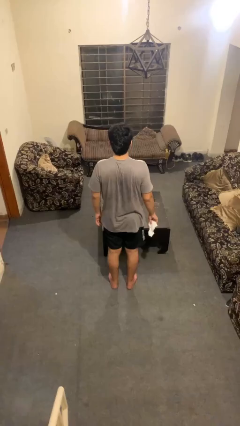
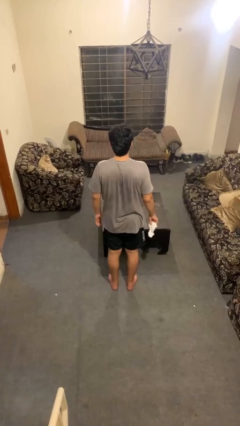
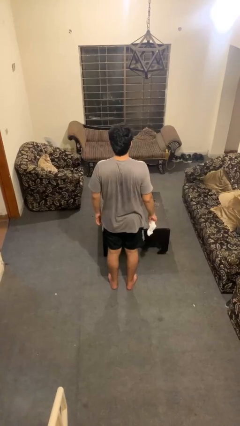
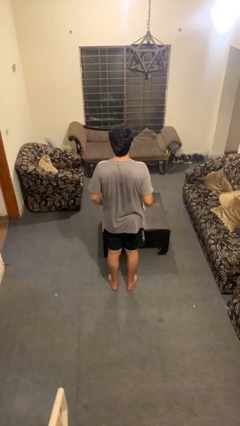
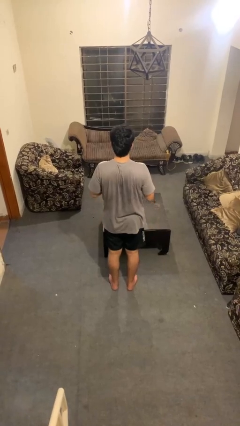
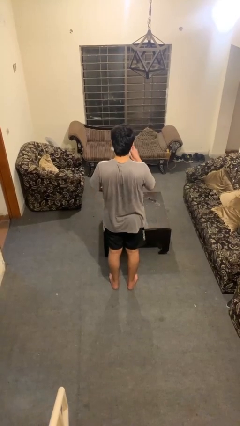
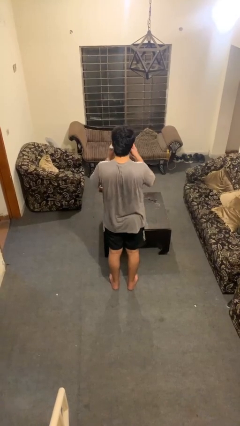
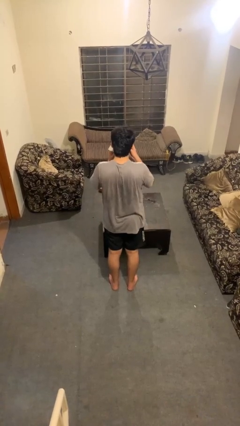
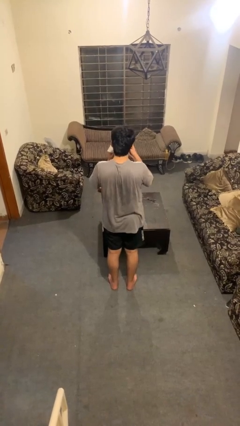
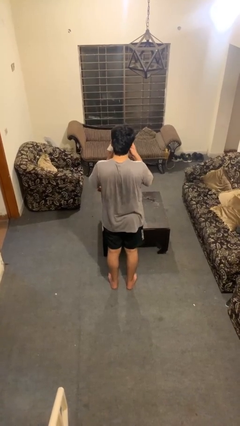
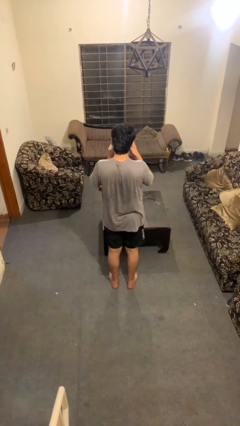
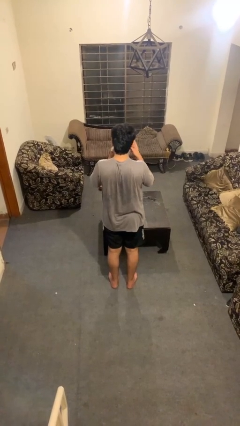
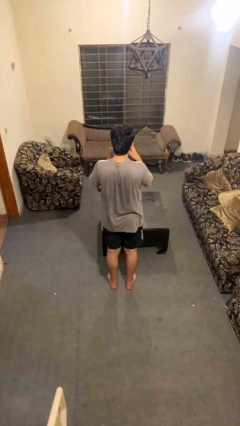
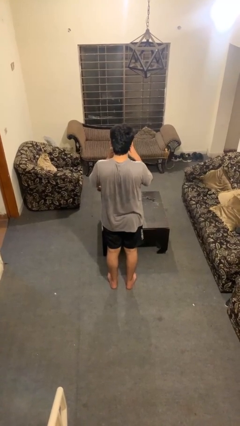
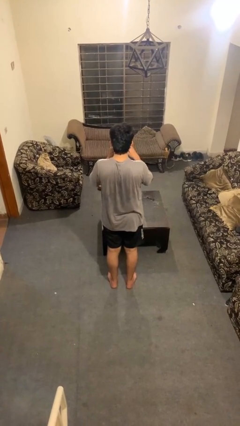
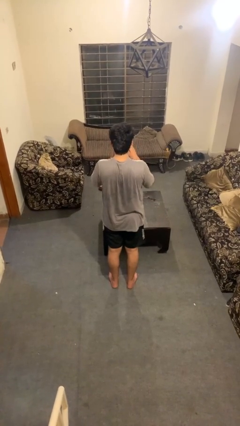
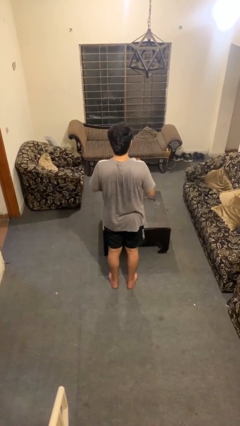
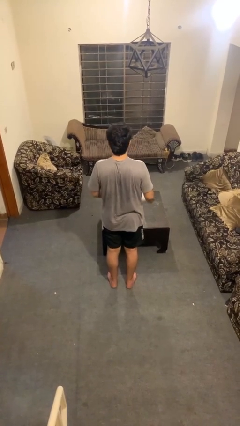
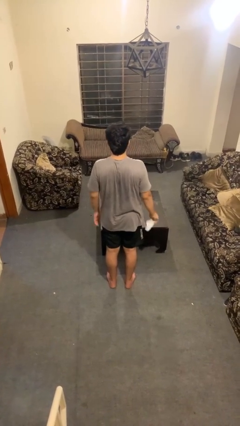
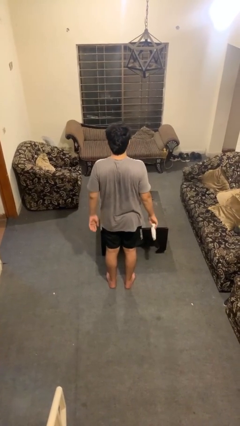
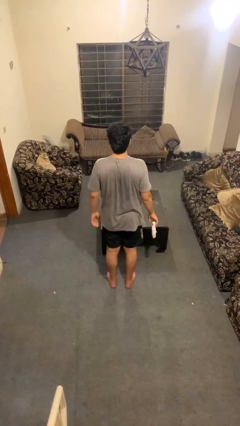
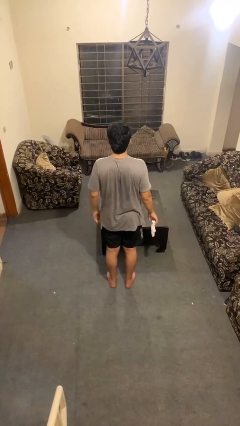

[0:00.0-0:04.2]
person blows nose

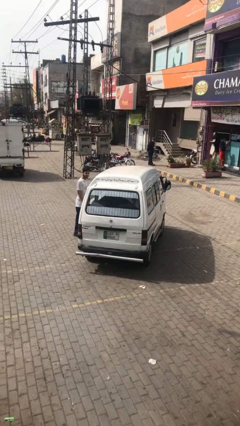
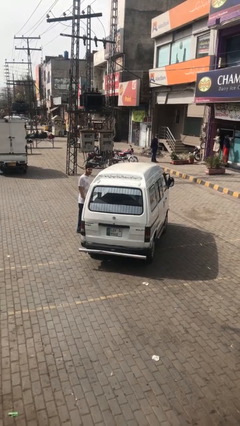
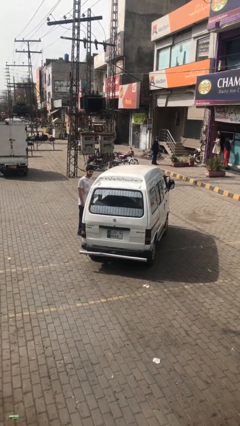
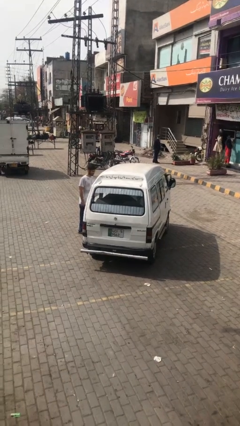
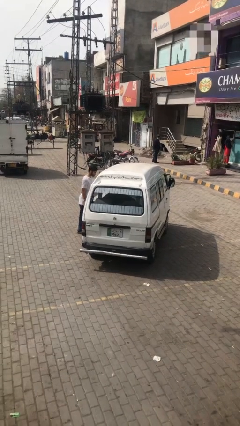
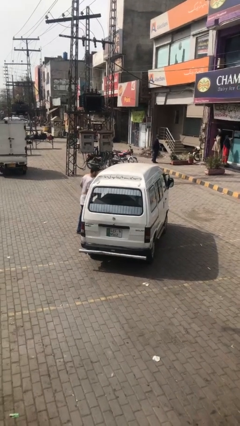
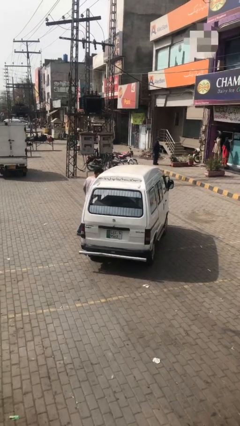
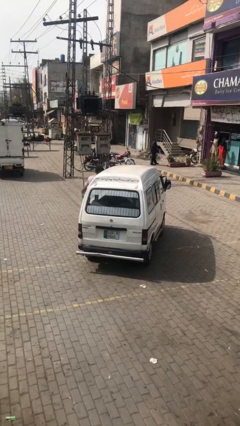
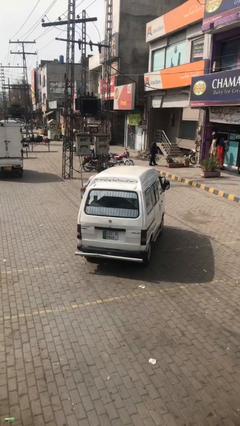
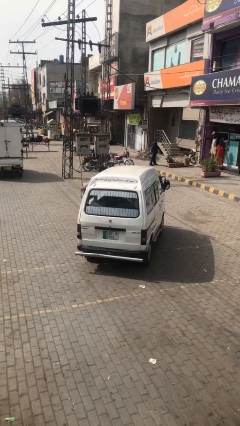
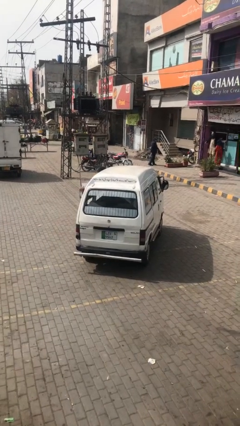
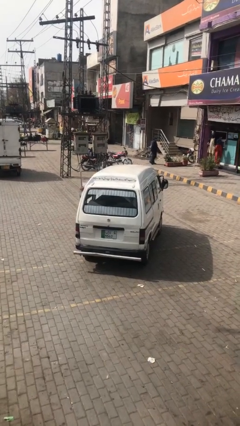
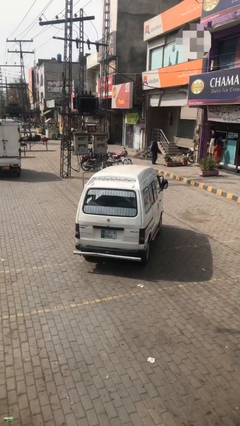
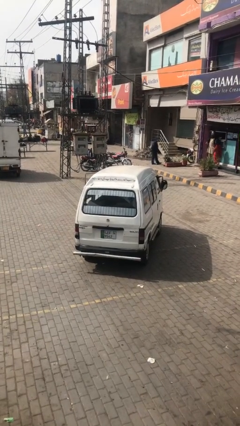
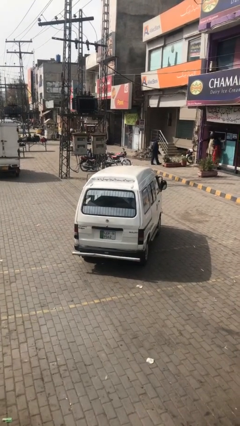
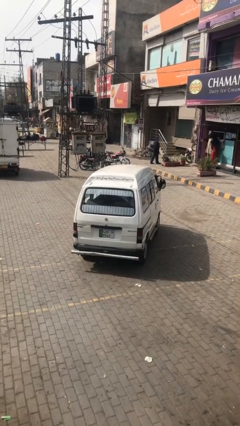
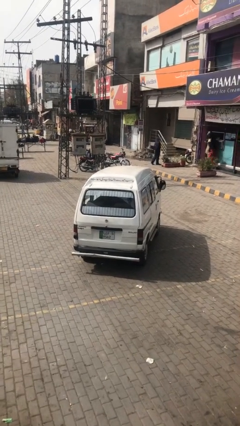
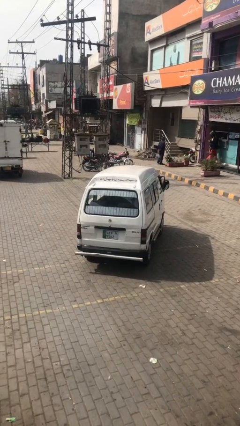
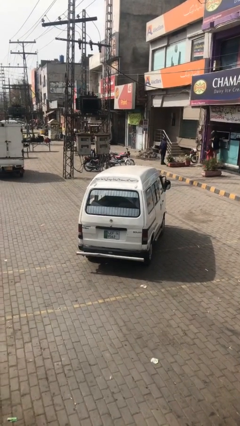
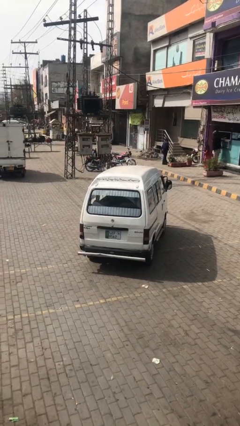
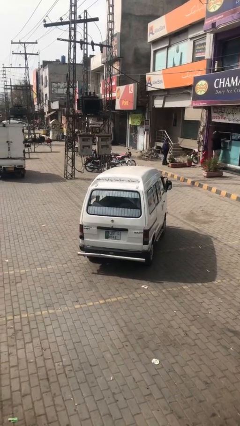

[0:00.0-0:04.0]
car picks up person

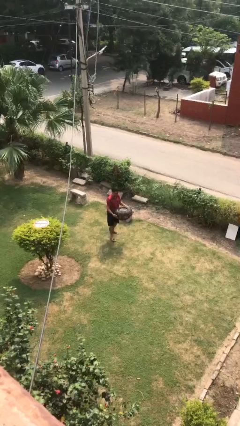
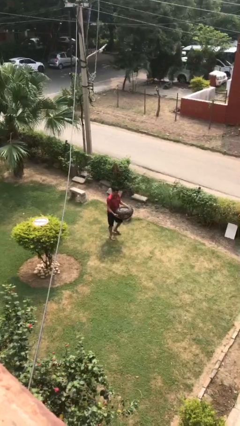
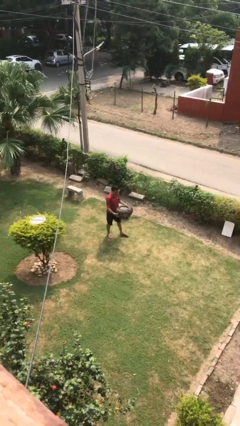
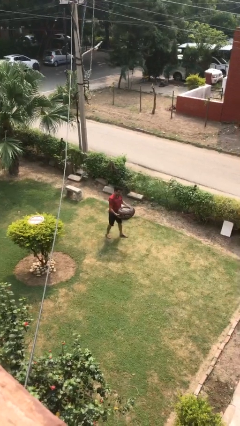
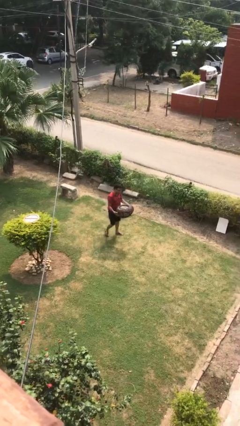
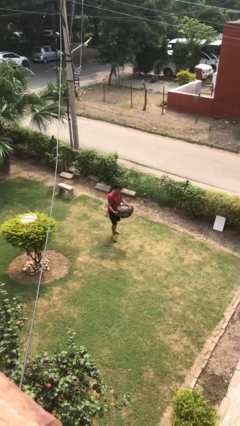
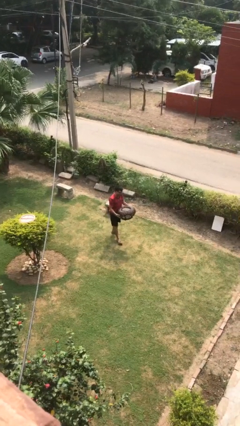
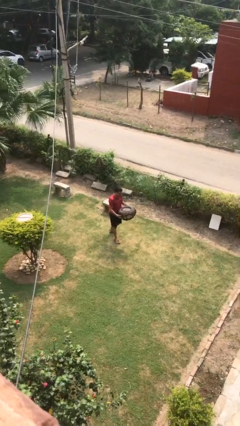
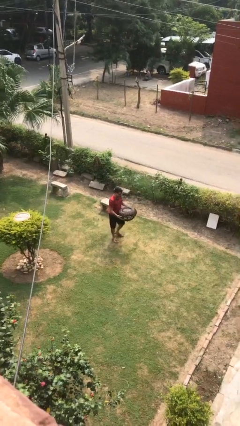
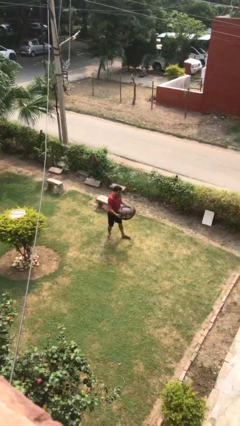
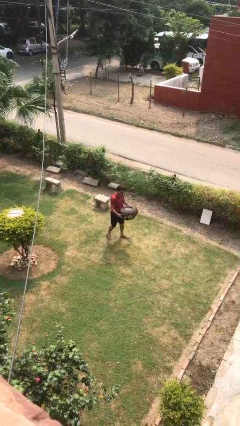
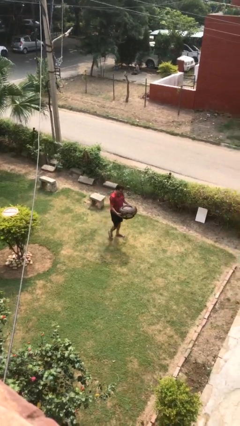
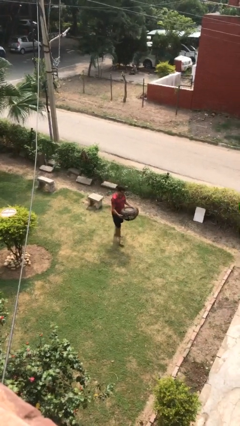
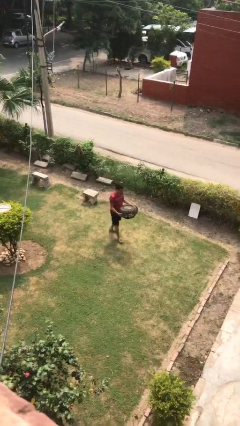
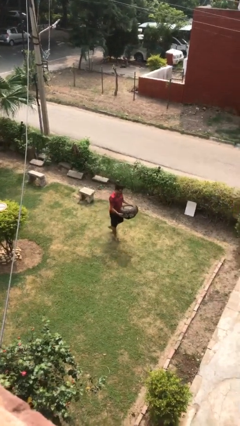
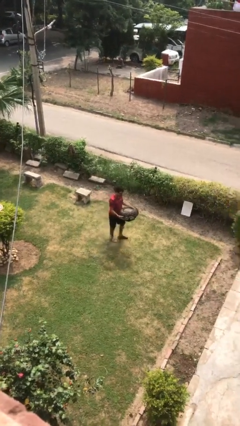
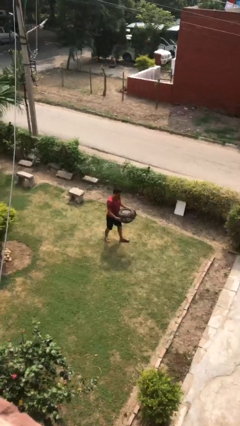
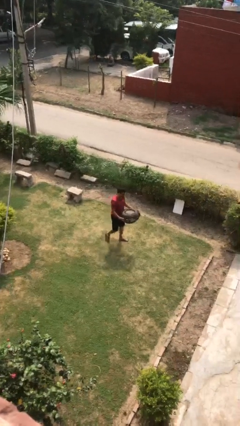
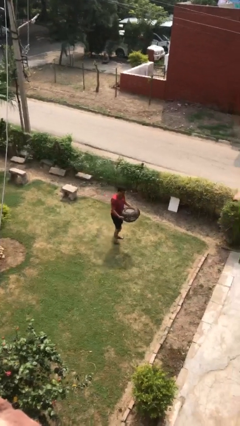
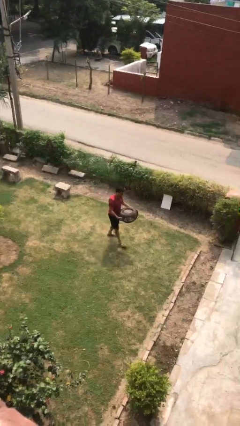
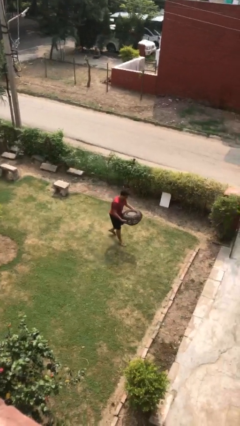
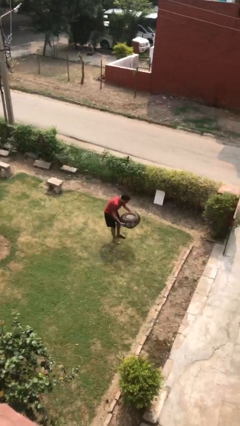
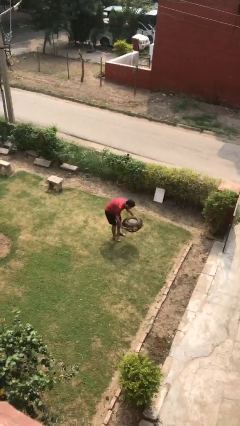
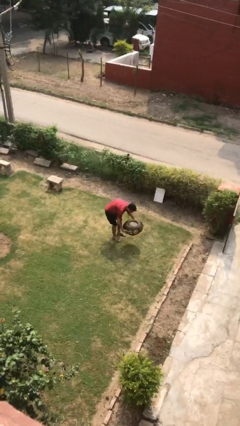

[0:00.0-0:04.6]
person carries heavy object

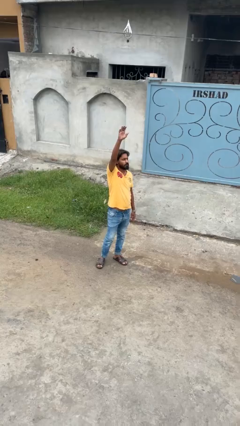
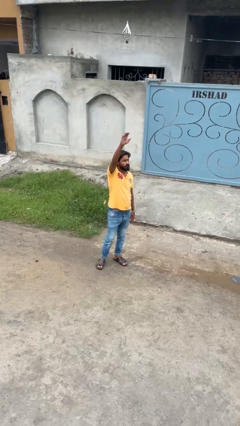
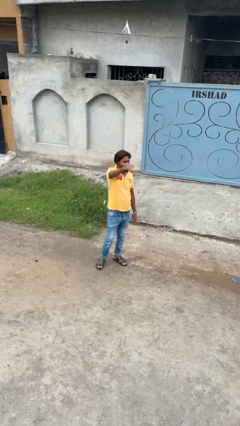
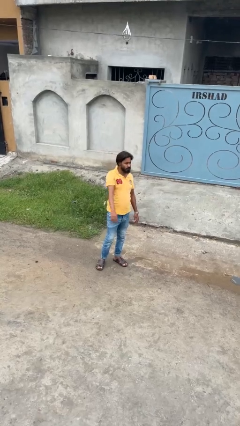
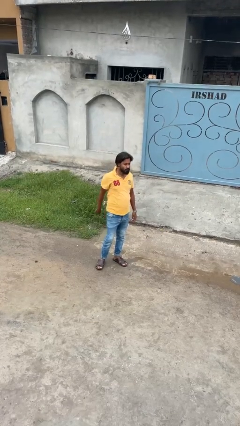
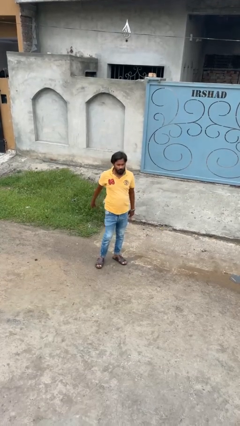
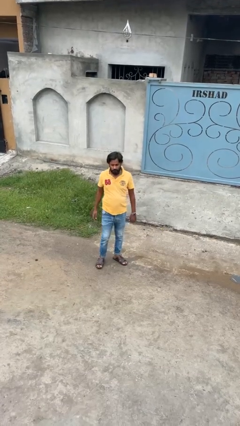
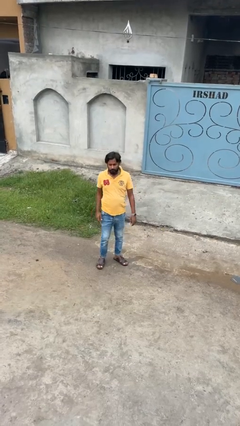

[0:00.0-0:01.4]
person gestures lower hand

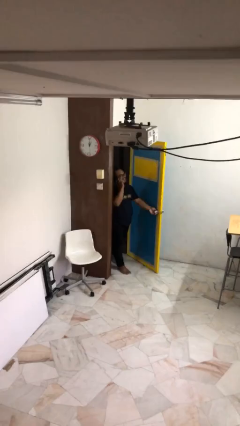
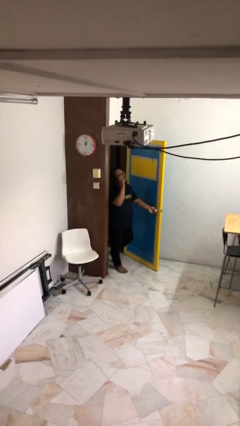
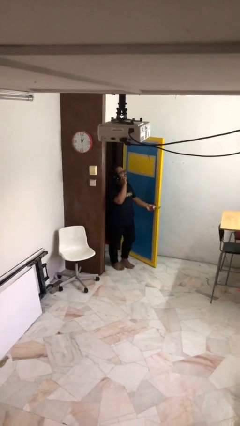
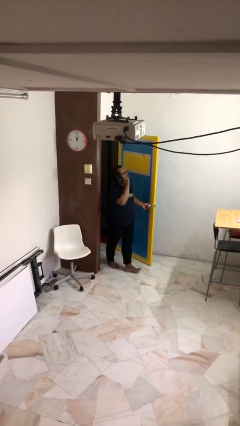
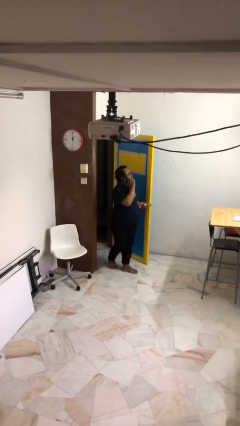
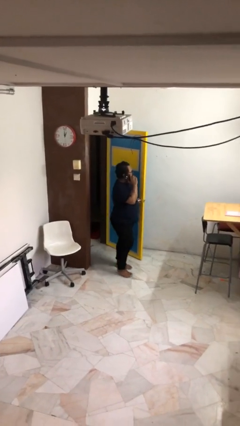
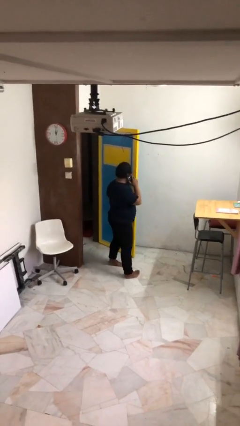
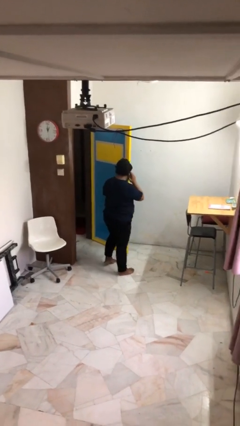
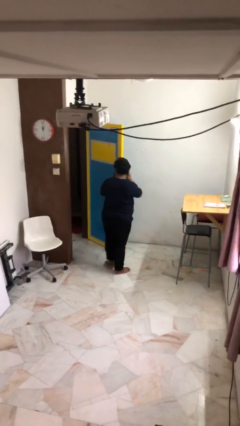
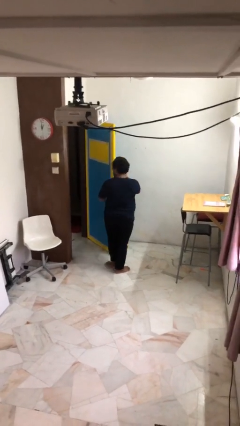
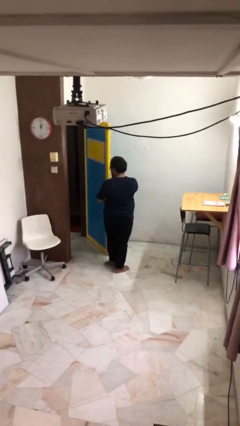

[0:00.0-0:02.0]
person enters scene through structure

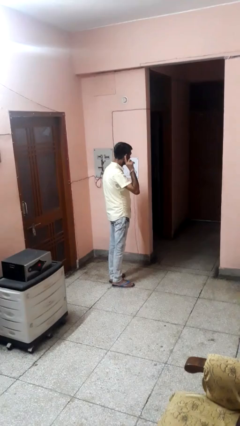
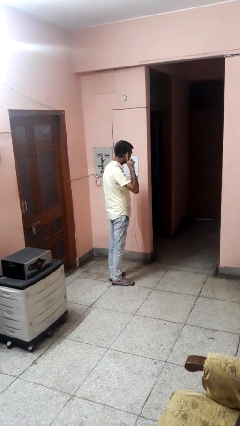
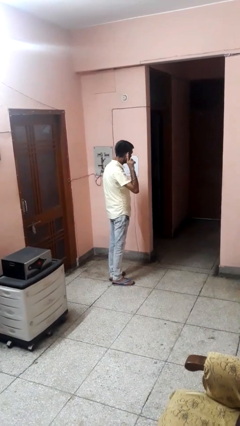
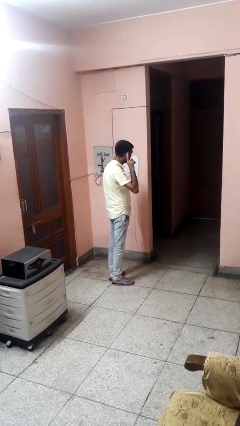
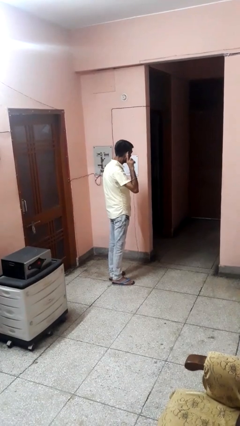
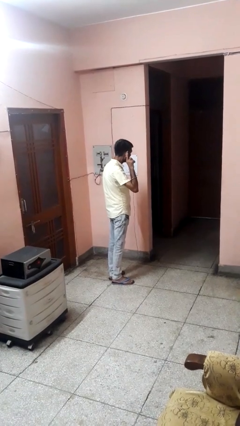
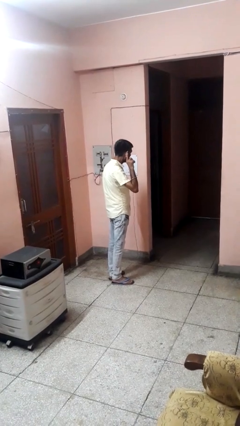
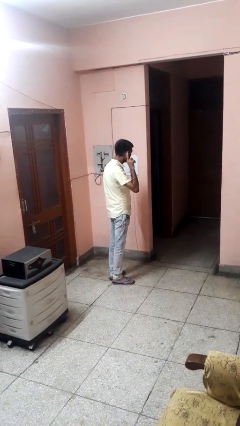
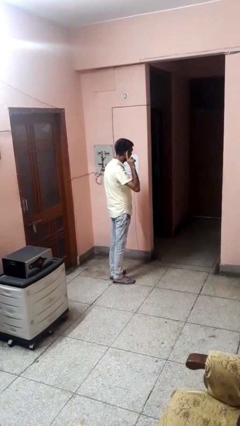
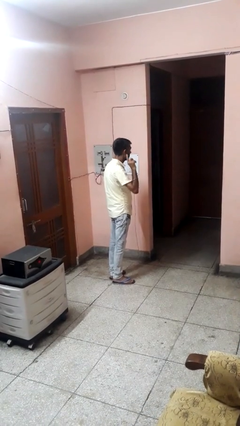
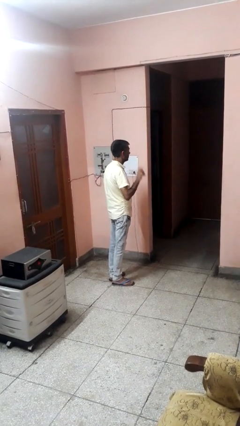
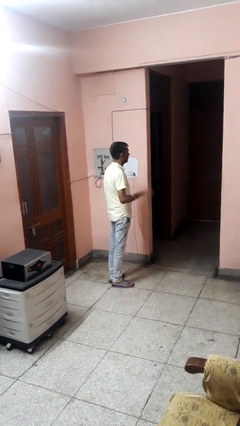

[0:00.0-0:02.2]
person gestures listen closely
